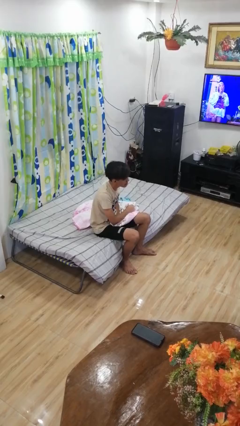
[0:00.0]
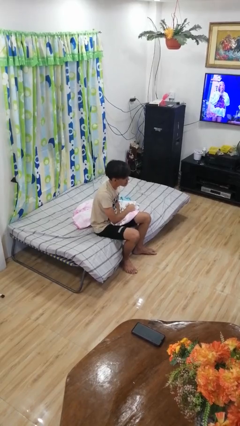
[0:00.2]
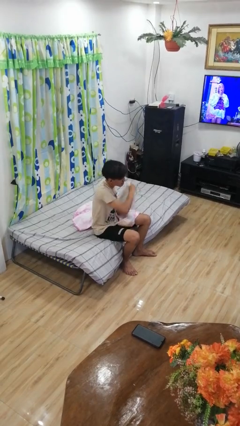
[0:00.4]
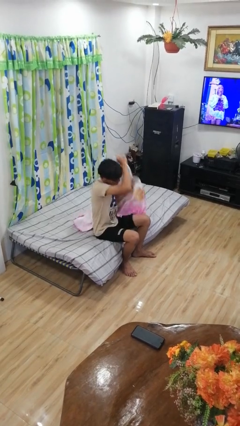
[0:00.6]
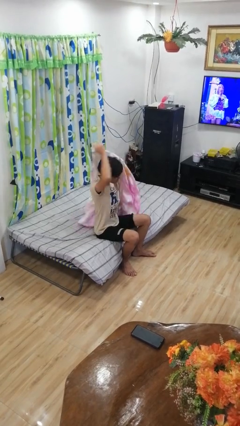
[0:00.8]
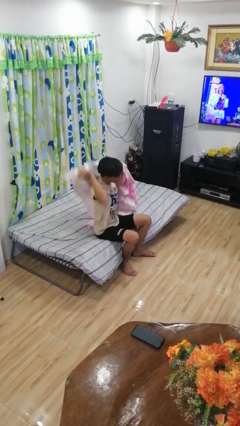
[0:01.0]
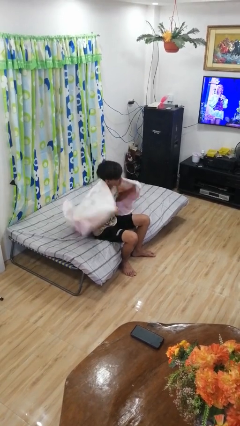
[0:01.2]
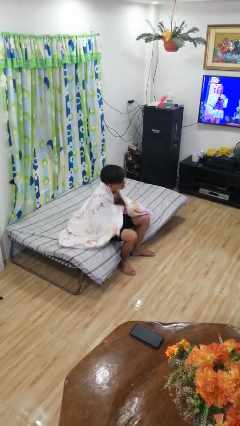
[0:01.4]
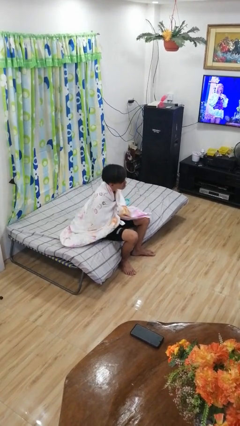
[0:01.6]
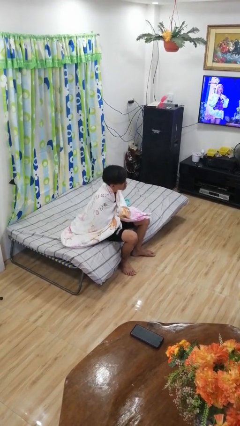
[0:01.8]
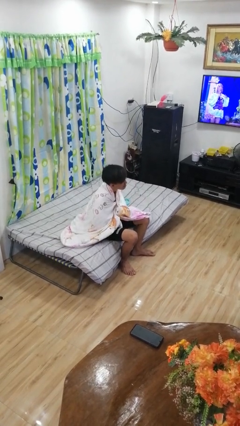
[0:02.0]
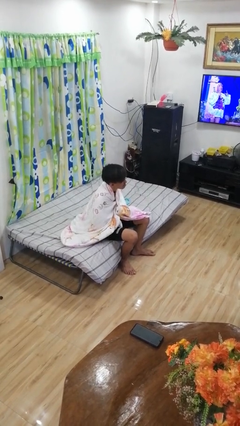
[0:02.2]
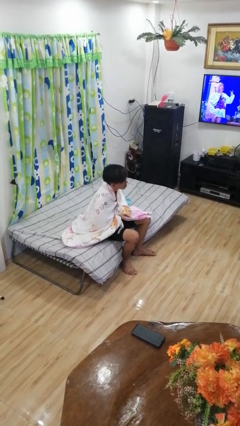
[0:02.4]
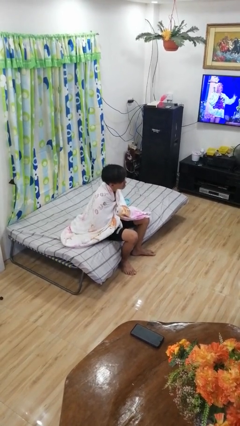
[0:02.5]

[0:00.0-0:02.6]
person covers with blanket

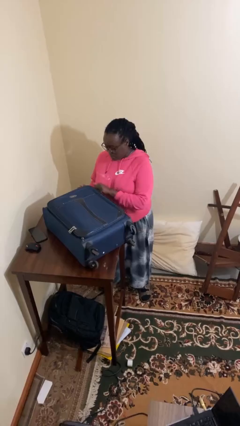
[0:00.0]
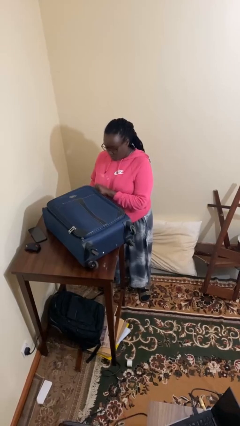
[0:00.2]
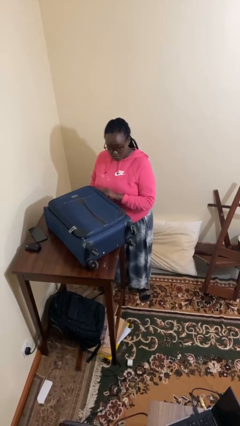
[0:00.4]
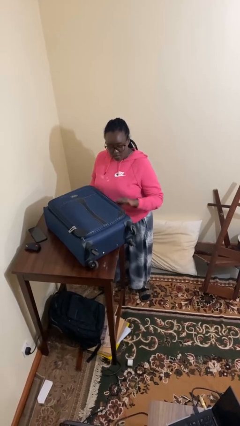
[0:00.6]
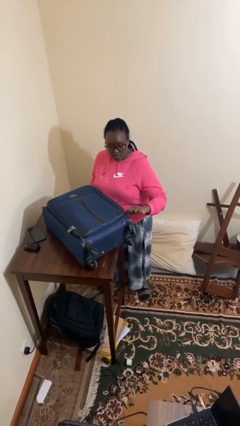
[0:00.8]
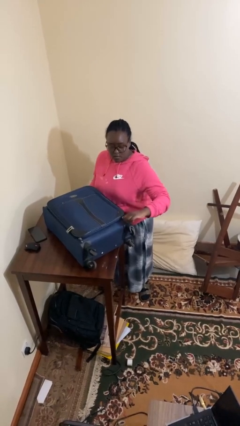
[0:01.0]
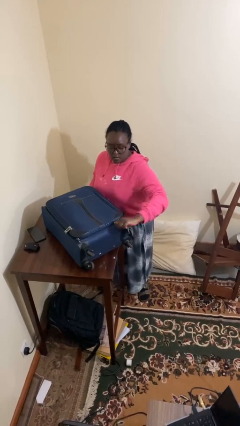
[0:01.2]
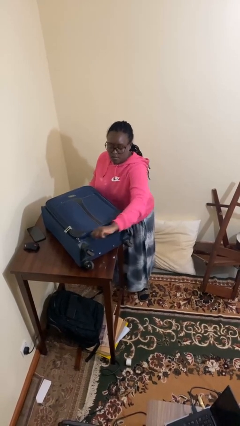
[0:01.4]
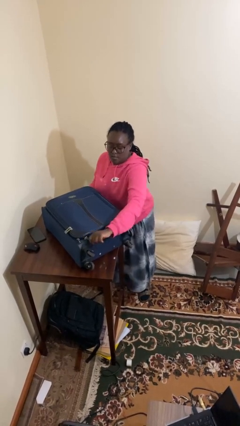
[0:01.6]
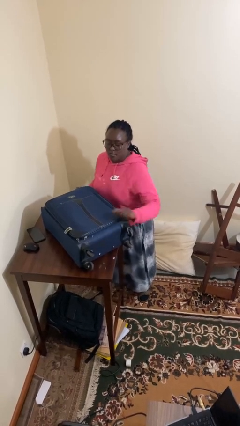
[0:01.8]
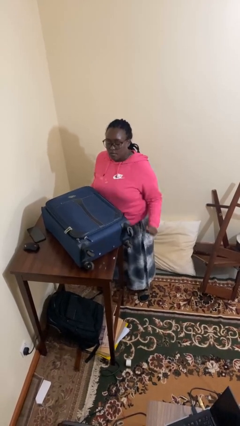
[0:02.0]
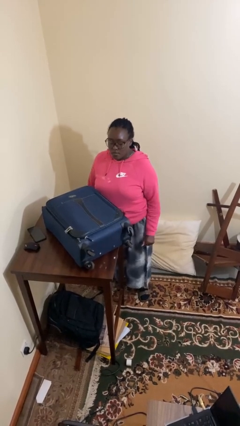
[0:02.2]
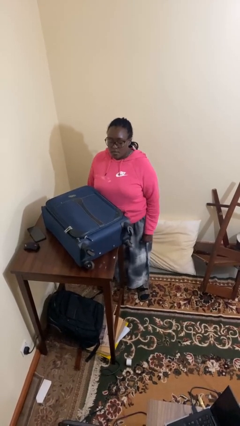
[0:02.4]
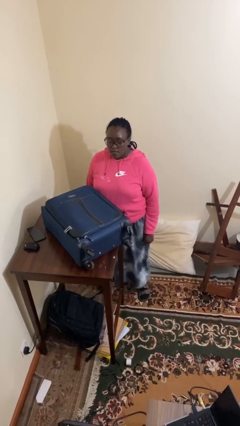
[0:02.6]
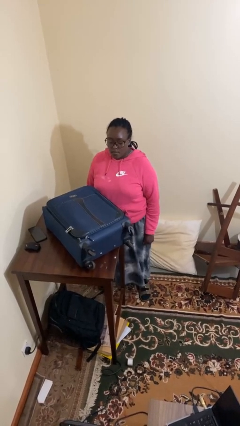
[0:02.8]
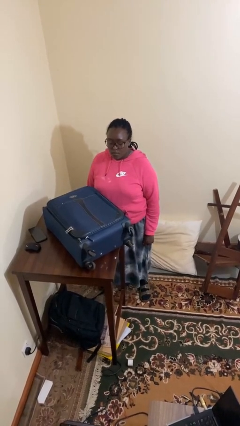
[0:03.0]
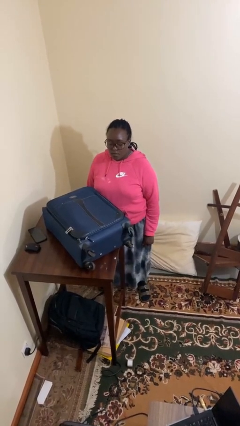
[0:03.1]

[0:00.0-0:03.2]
person closes suitcase

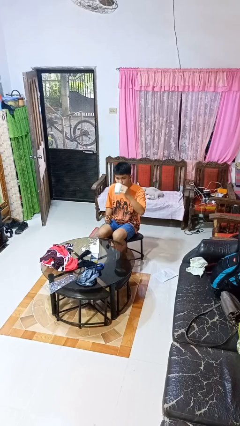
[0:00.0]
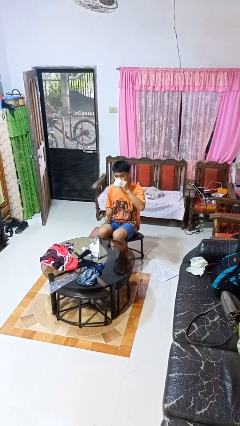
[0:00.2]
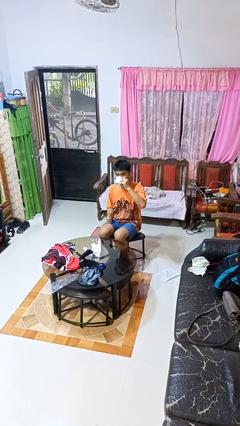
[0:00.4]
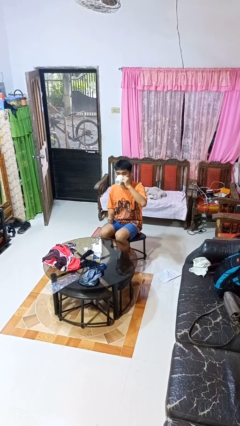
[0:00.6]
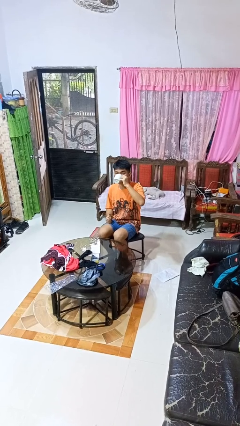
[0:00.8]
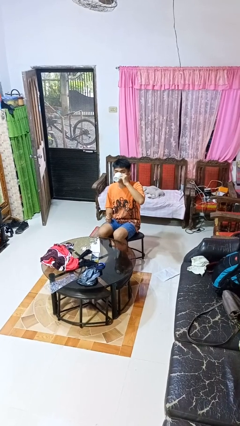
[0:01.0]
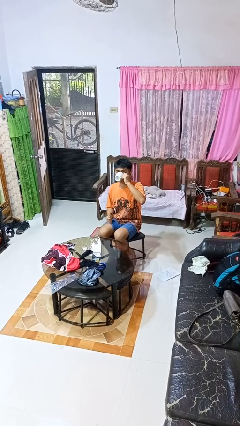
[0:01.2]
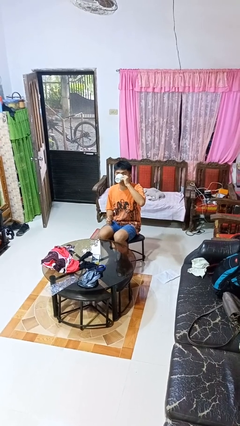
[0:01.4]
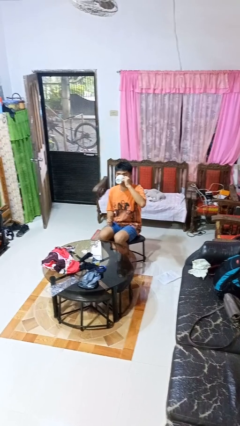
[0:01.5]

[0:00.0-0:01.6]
person drinks from mug

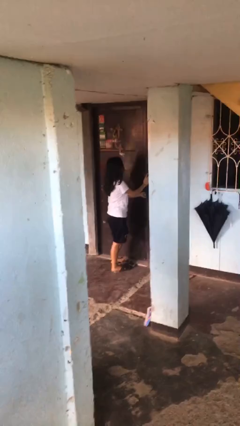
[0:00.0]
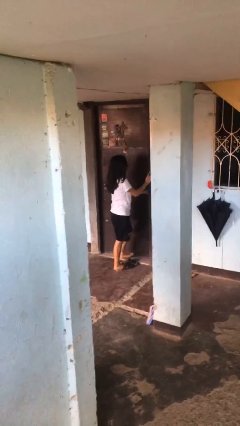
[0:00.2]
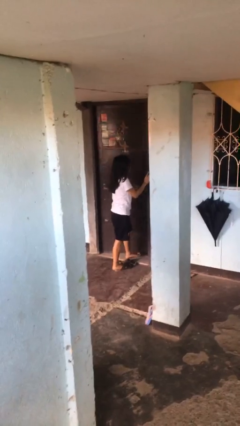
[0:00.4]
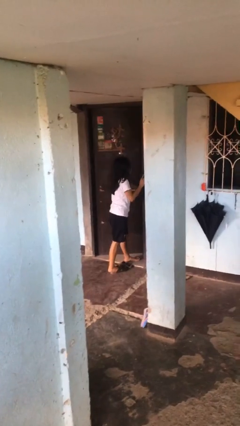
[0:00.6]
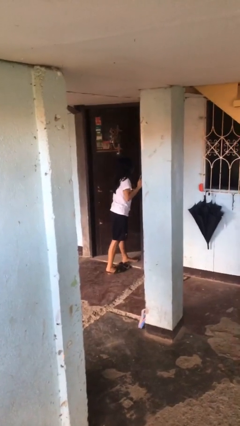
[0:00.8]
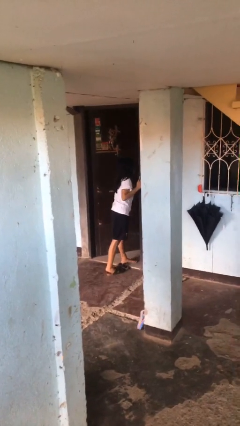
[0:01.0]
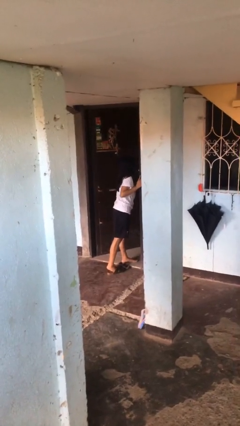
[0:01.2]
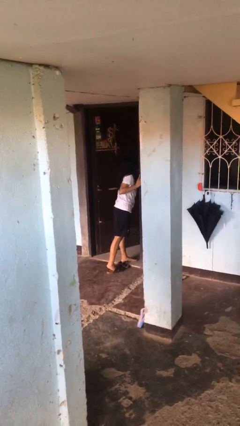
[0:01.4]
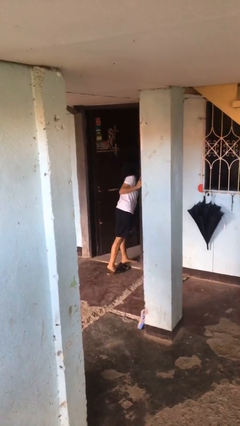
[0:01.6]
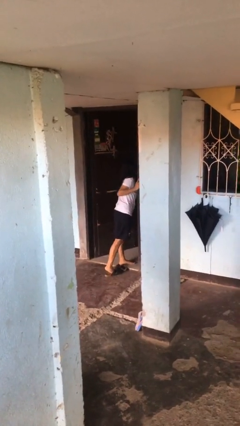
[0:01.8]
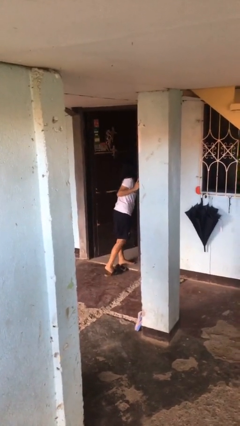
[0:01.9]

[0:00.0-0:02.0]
person opens facility door

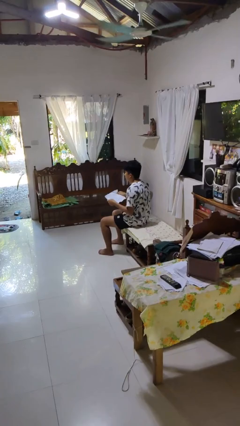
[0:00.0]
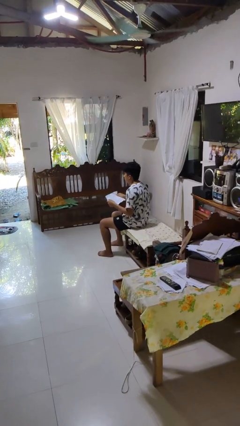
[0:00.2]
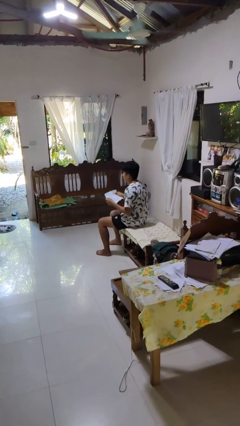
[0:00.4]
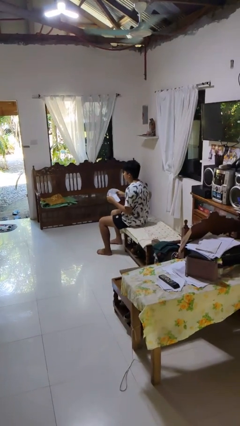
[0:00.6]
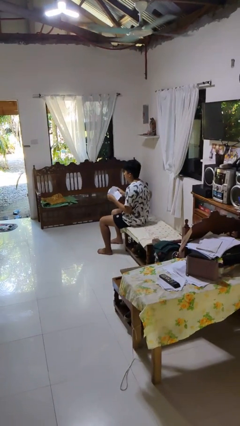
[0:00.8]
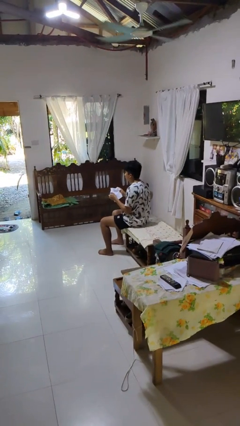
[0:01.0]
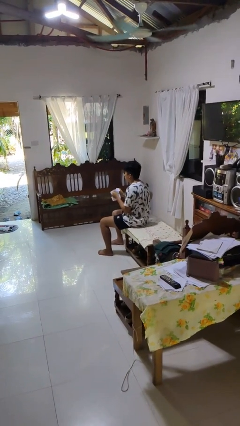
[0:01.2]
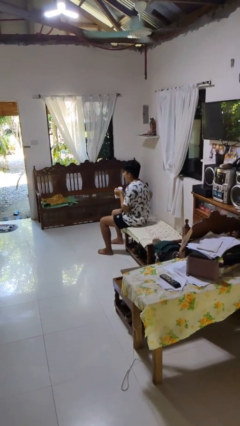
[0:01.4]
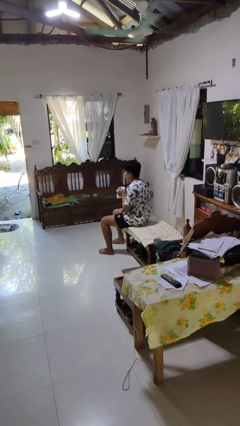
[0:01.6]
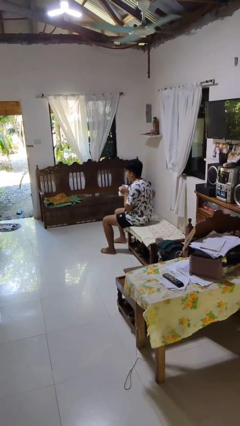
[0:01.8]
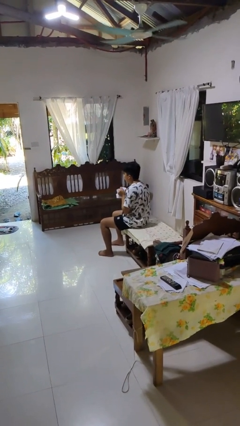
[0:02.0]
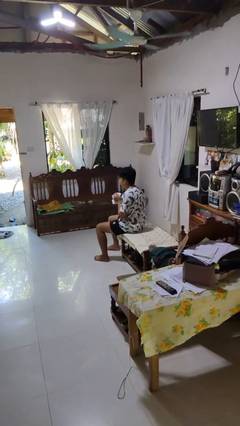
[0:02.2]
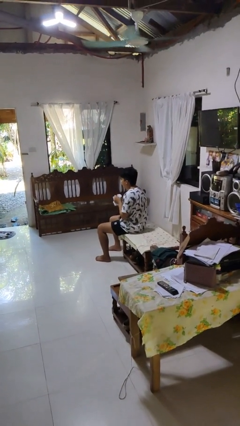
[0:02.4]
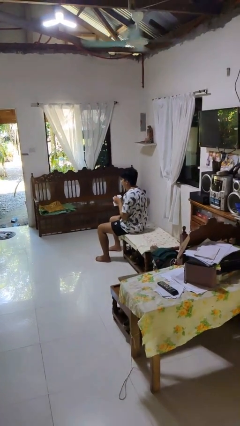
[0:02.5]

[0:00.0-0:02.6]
person crumples paper

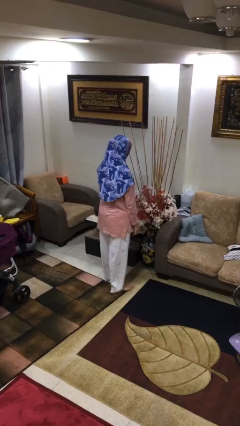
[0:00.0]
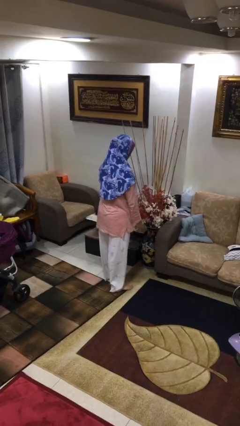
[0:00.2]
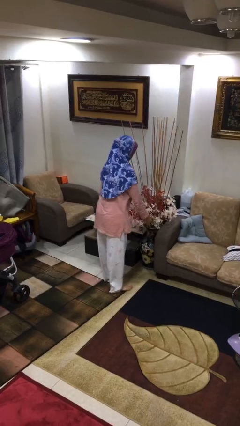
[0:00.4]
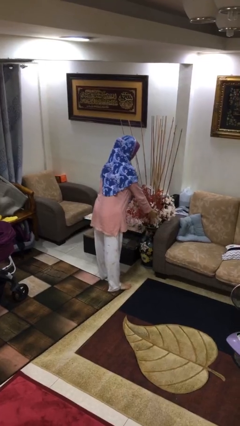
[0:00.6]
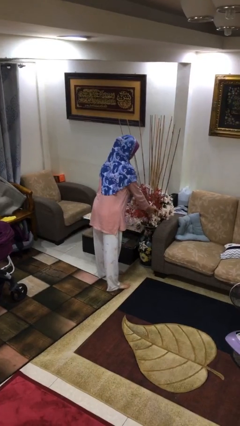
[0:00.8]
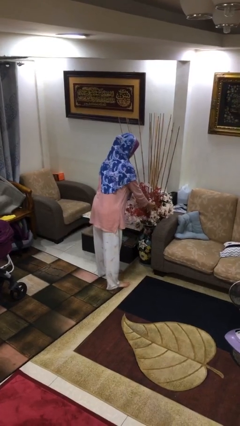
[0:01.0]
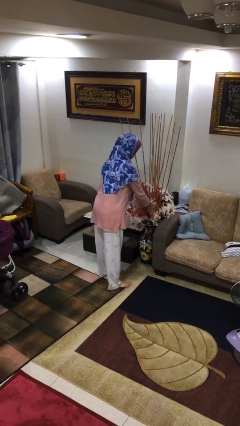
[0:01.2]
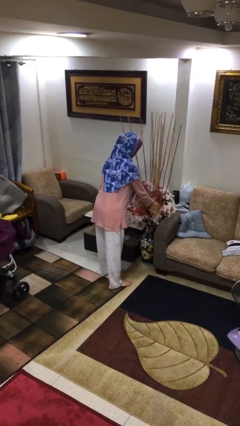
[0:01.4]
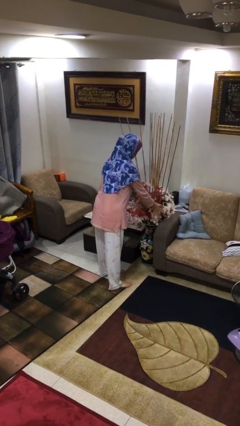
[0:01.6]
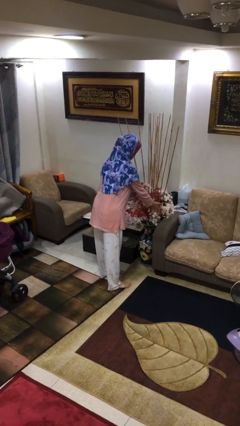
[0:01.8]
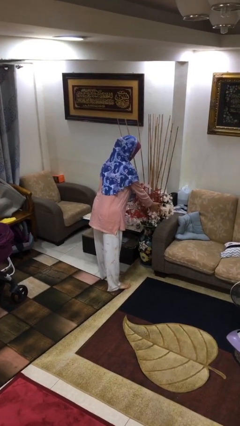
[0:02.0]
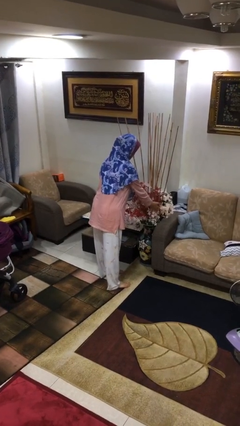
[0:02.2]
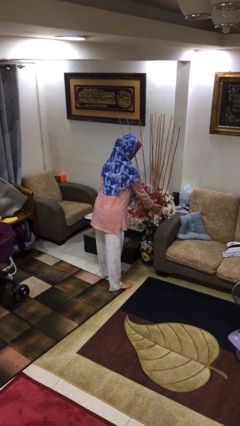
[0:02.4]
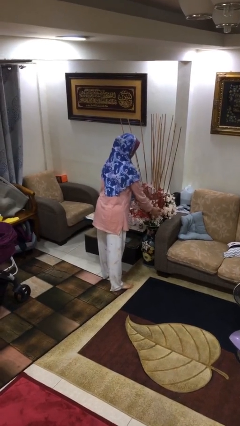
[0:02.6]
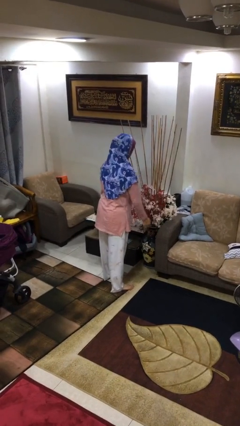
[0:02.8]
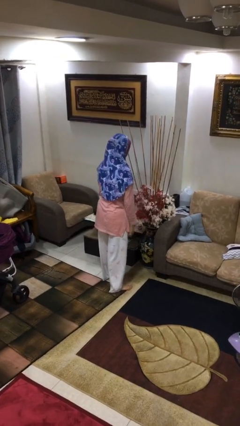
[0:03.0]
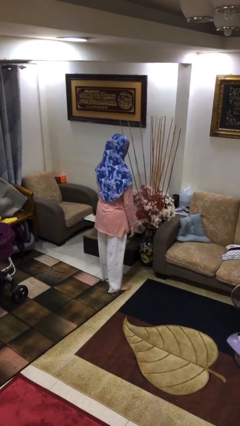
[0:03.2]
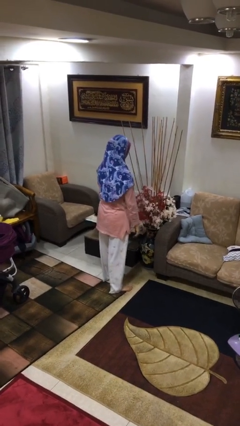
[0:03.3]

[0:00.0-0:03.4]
person arranges flowers in vase

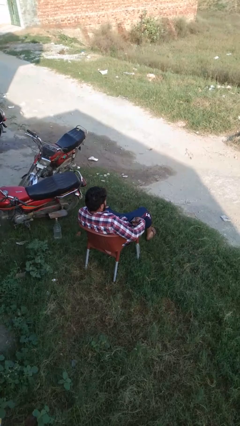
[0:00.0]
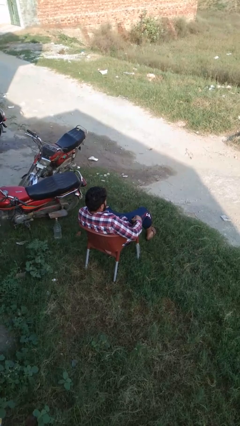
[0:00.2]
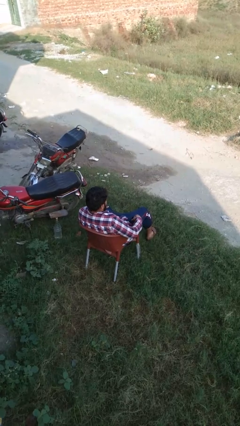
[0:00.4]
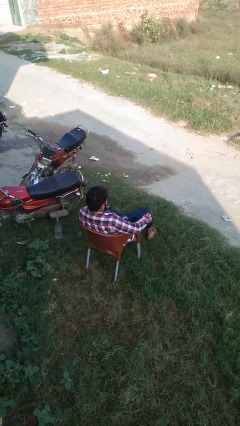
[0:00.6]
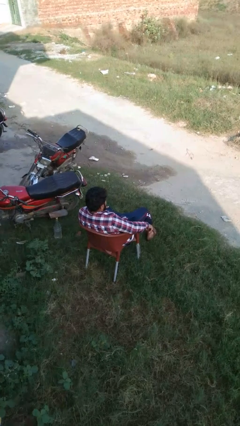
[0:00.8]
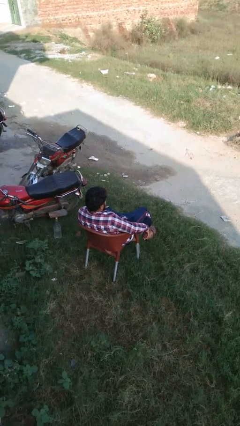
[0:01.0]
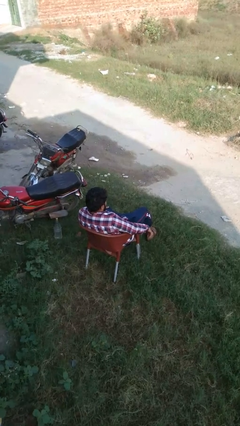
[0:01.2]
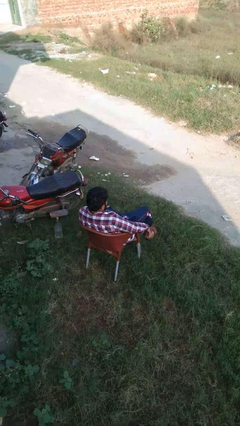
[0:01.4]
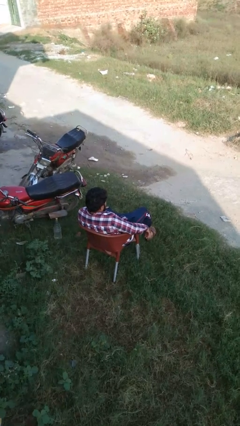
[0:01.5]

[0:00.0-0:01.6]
person puts phone into pocket
